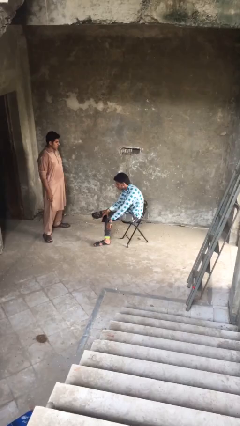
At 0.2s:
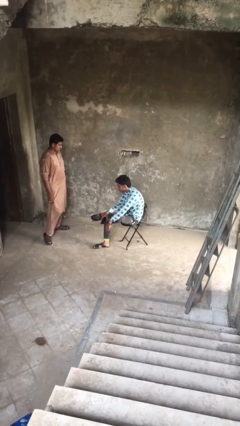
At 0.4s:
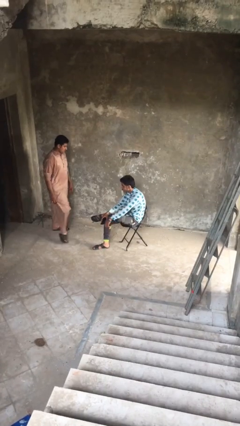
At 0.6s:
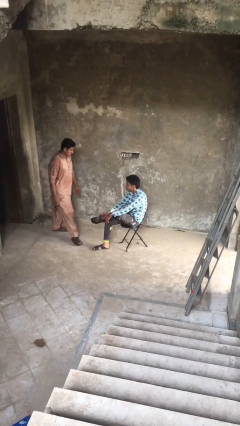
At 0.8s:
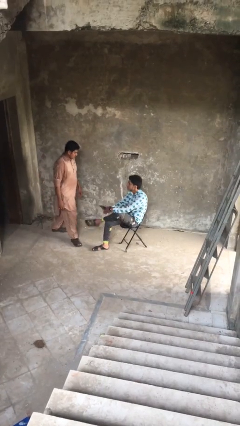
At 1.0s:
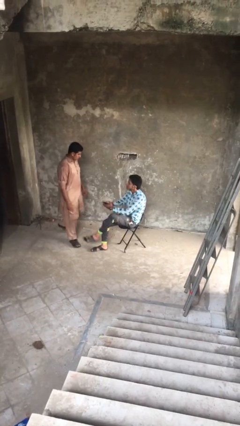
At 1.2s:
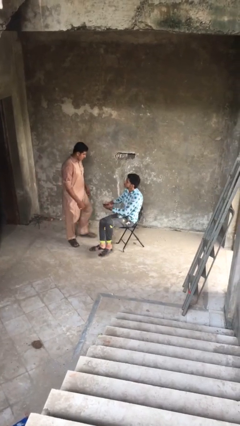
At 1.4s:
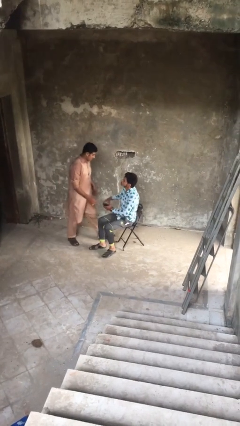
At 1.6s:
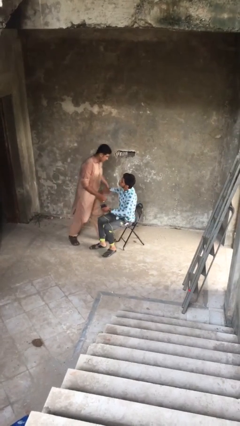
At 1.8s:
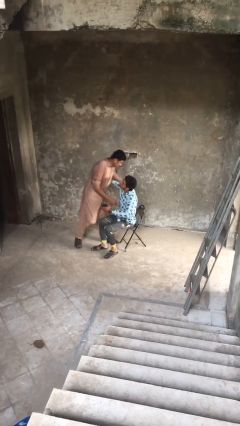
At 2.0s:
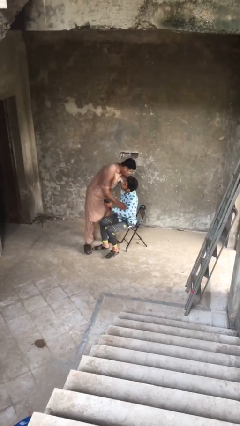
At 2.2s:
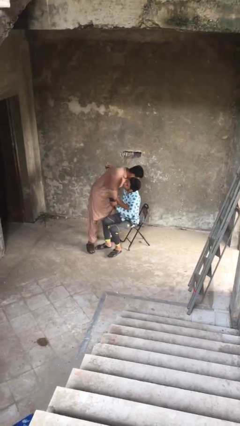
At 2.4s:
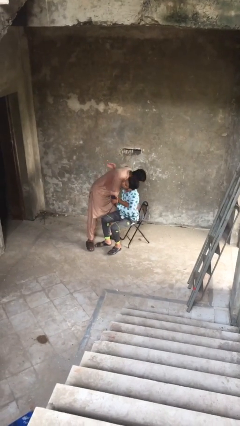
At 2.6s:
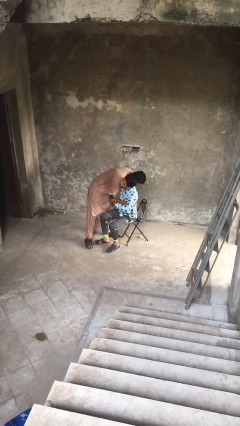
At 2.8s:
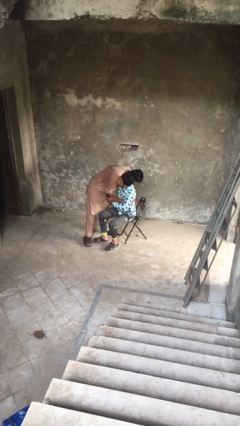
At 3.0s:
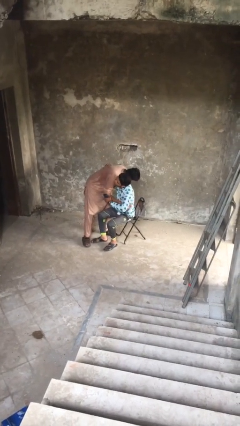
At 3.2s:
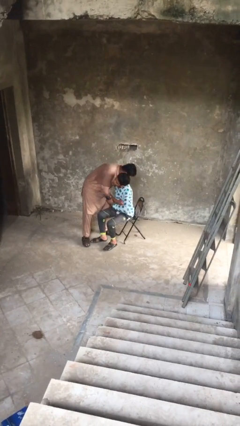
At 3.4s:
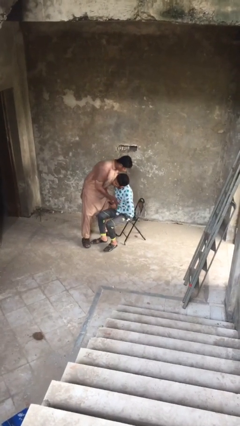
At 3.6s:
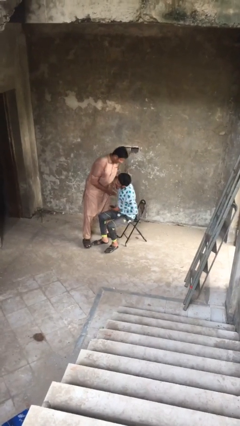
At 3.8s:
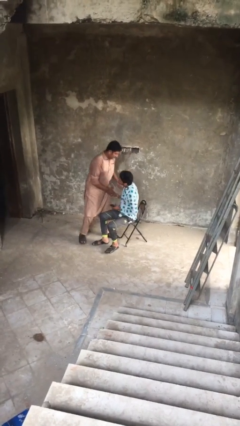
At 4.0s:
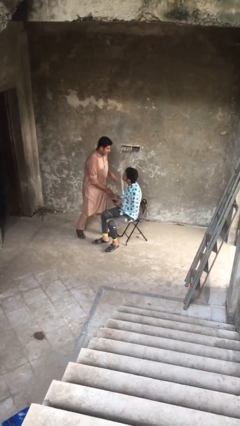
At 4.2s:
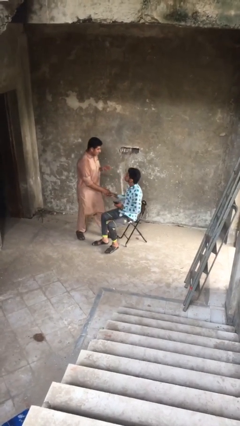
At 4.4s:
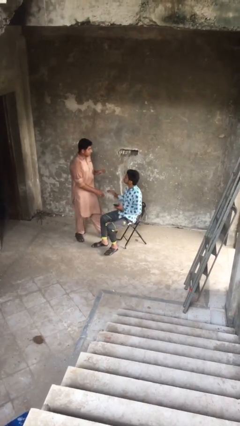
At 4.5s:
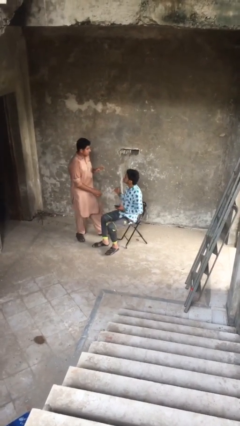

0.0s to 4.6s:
person embraces person

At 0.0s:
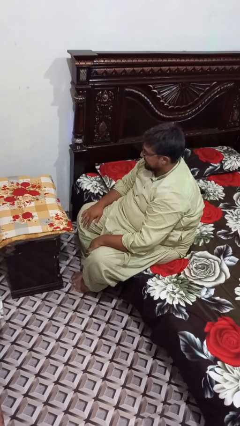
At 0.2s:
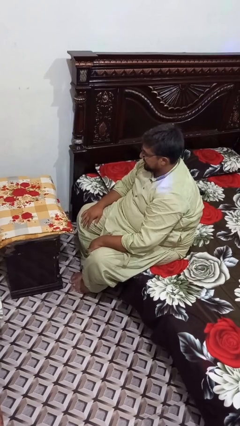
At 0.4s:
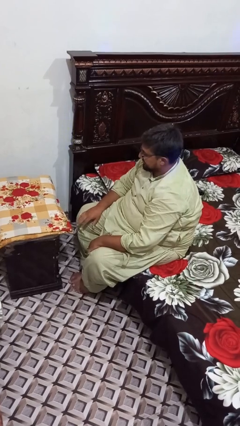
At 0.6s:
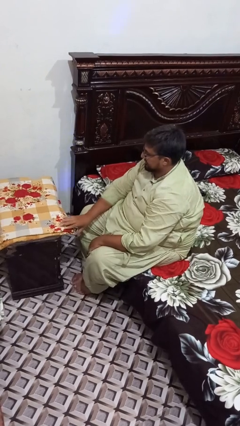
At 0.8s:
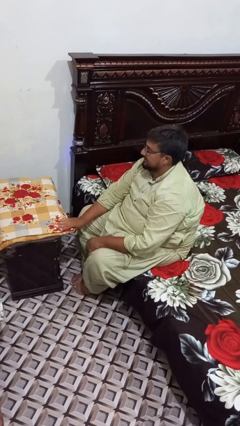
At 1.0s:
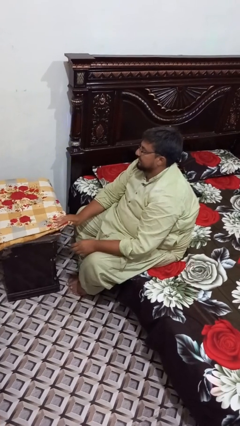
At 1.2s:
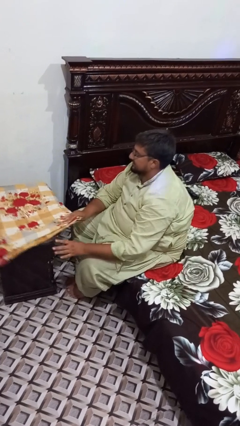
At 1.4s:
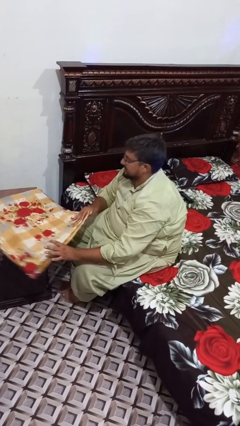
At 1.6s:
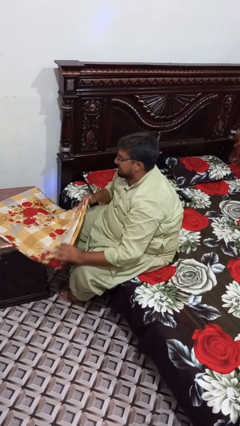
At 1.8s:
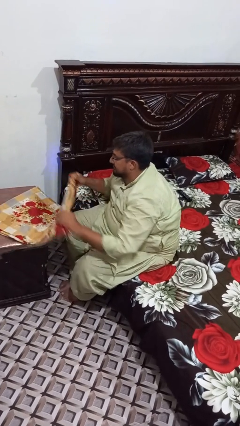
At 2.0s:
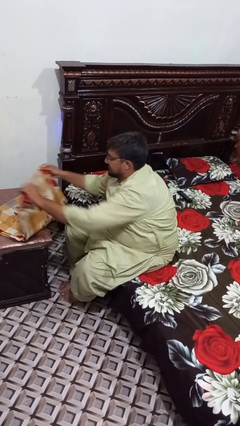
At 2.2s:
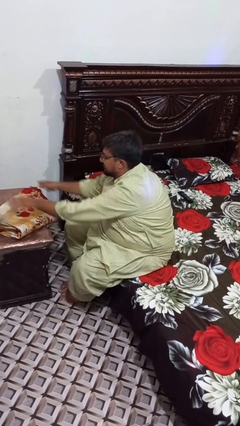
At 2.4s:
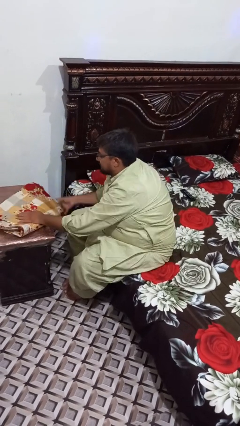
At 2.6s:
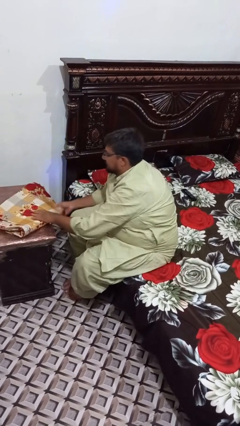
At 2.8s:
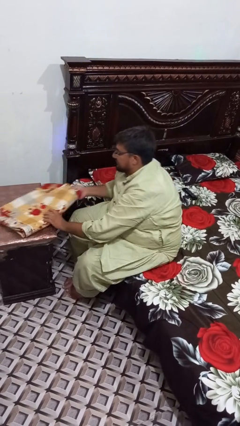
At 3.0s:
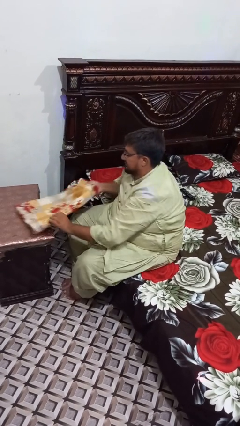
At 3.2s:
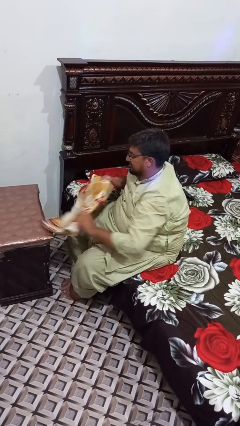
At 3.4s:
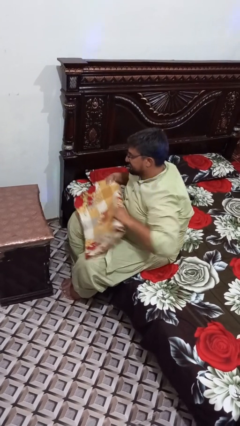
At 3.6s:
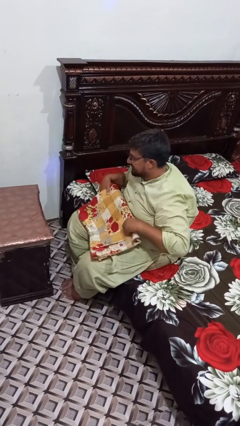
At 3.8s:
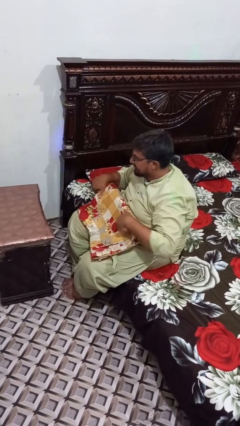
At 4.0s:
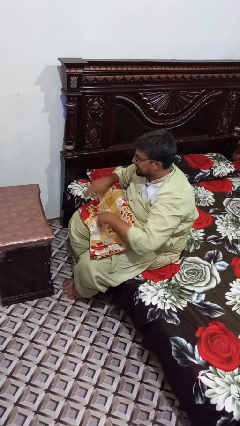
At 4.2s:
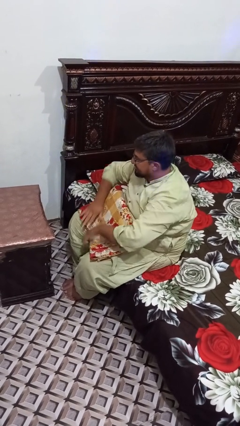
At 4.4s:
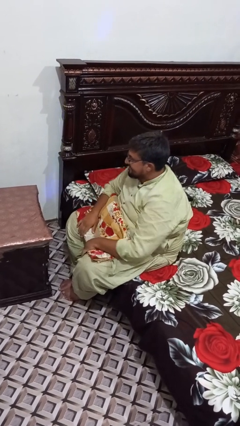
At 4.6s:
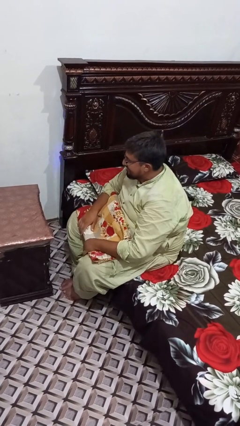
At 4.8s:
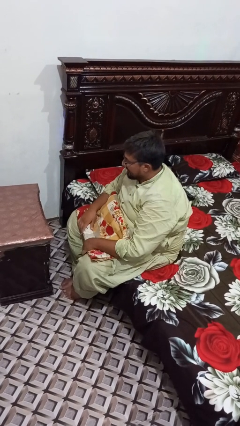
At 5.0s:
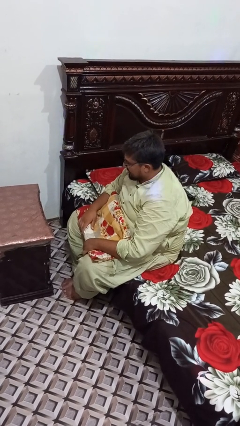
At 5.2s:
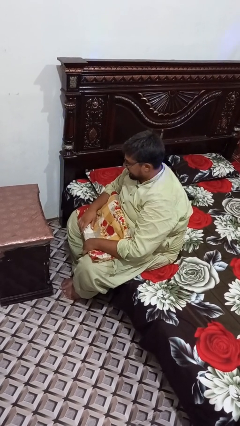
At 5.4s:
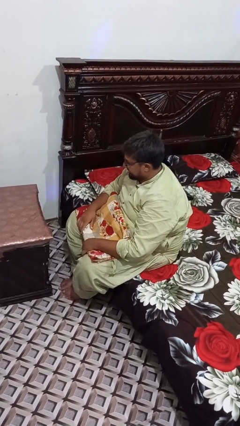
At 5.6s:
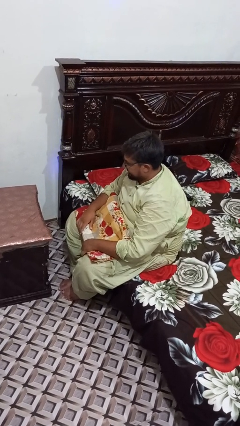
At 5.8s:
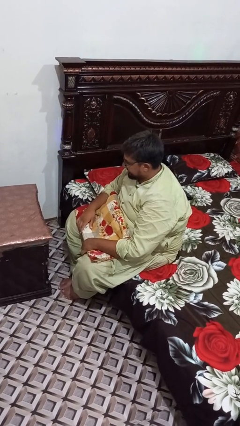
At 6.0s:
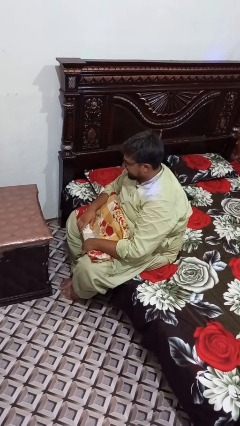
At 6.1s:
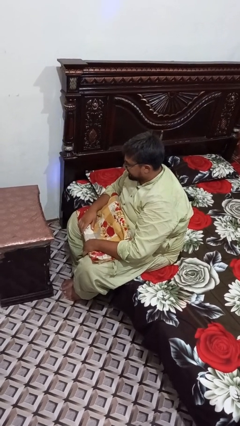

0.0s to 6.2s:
person folds tablecloth

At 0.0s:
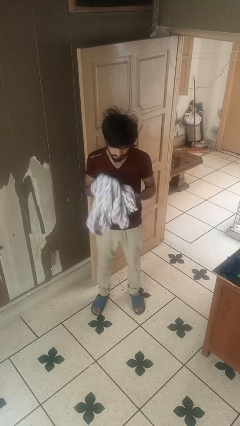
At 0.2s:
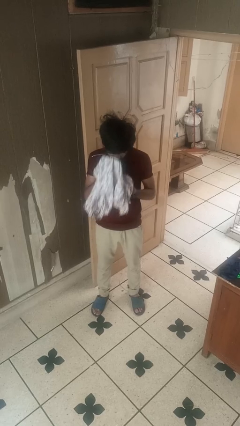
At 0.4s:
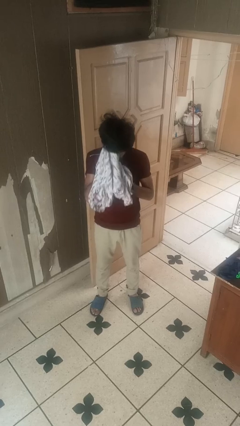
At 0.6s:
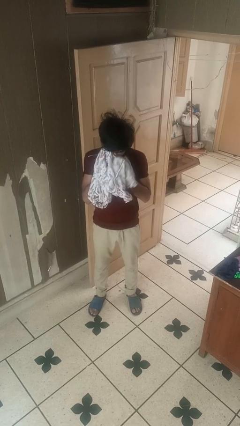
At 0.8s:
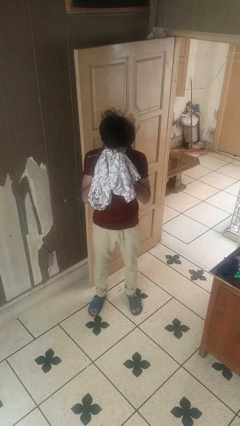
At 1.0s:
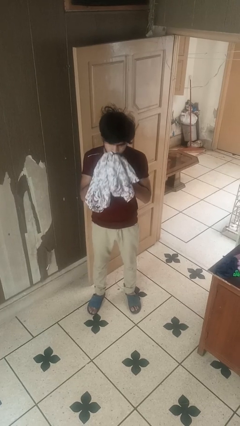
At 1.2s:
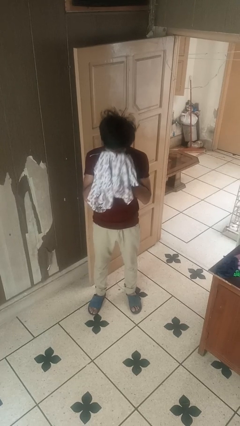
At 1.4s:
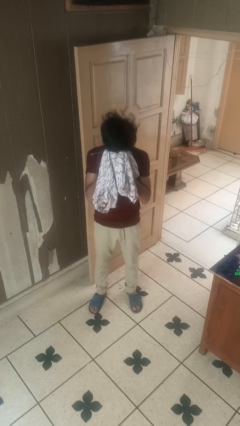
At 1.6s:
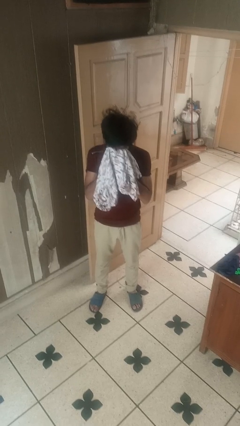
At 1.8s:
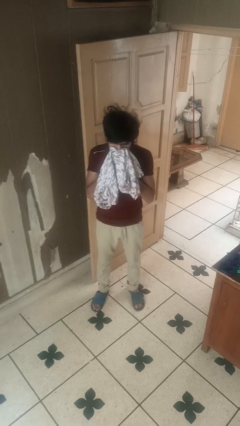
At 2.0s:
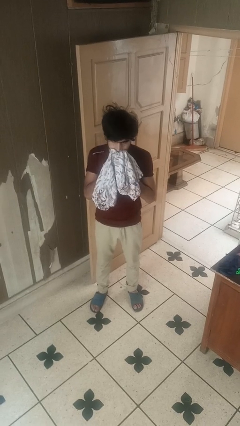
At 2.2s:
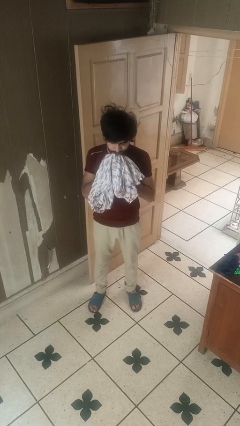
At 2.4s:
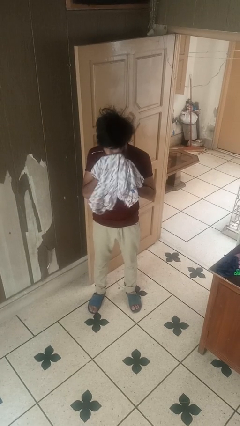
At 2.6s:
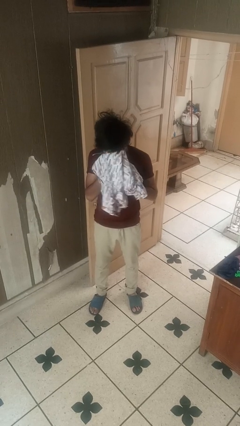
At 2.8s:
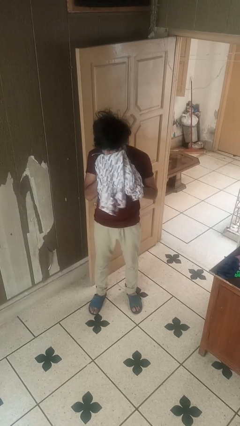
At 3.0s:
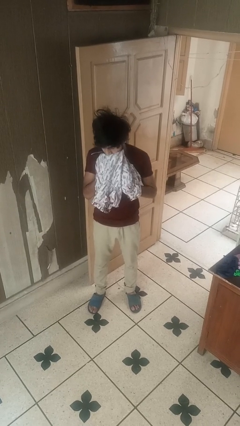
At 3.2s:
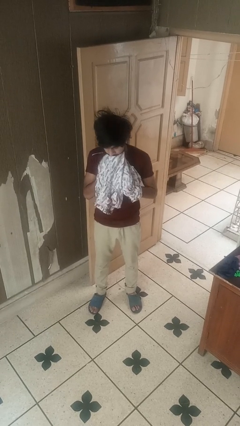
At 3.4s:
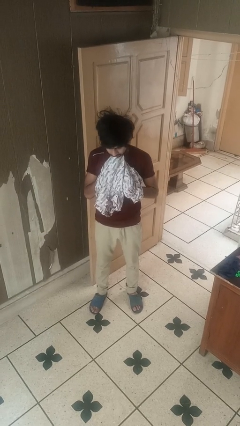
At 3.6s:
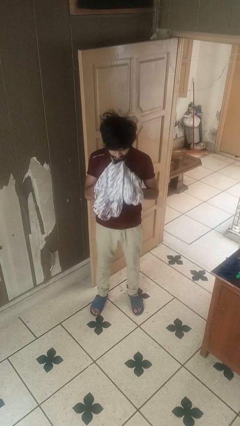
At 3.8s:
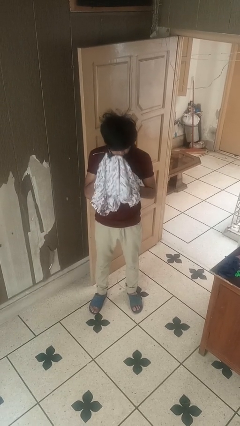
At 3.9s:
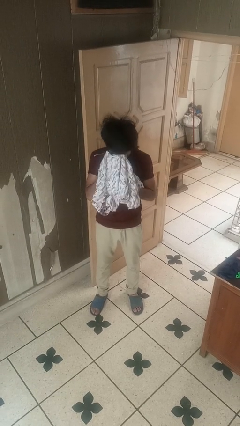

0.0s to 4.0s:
person wipes mouth with napkin

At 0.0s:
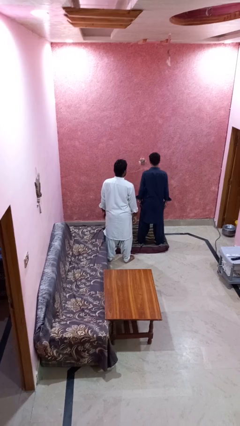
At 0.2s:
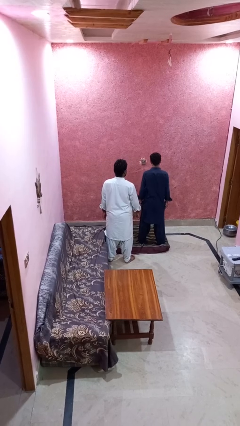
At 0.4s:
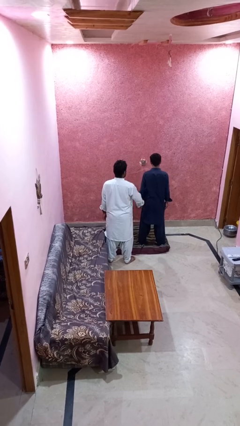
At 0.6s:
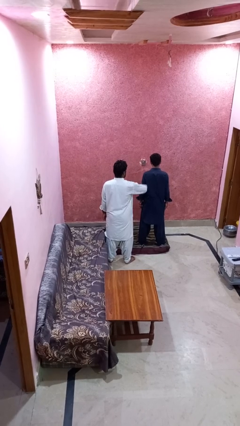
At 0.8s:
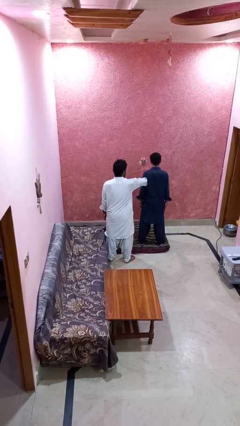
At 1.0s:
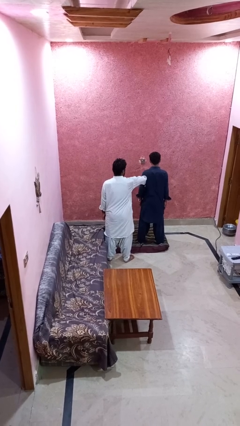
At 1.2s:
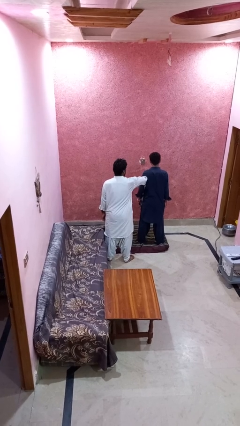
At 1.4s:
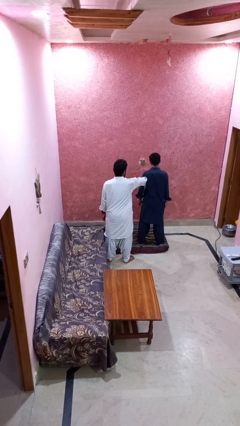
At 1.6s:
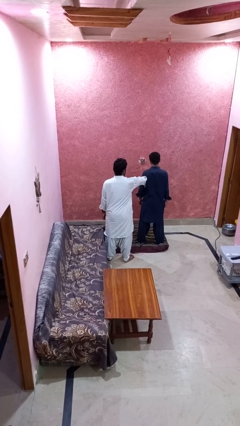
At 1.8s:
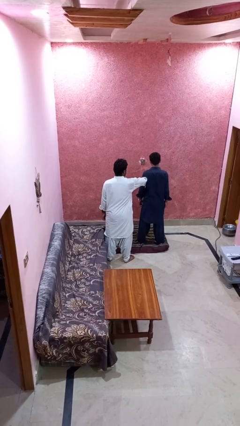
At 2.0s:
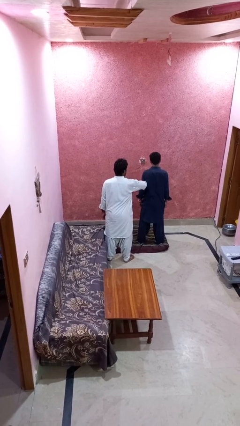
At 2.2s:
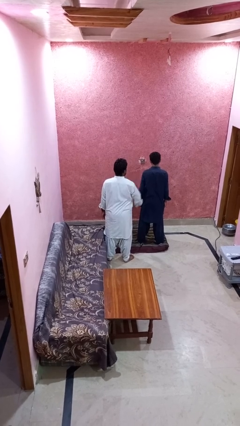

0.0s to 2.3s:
person grabs person by forearm

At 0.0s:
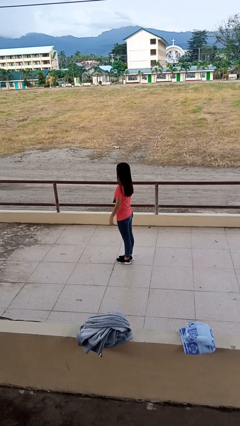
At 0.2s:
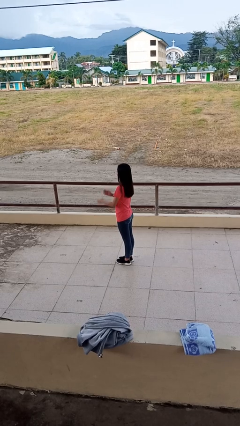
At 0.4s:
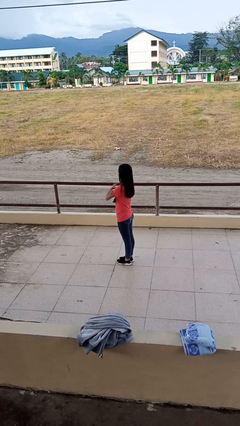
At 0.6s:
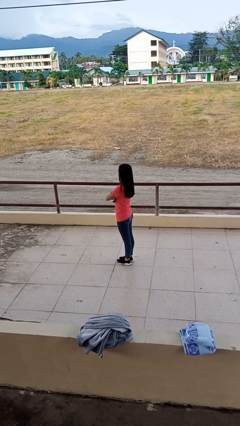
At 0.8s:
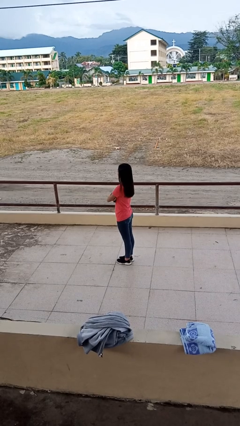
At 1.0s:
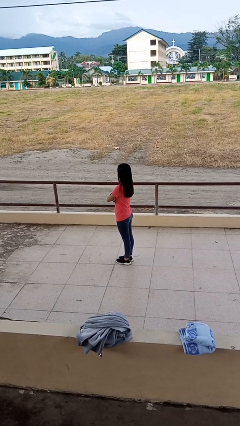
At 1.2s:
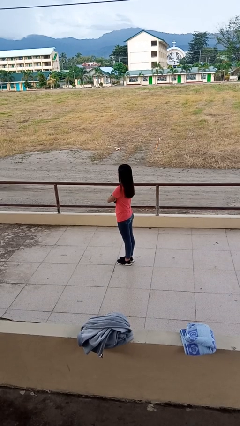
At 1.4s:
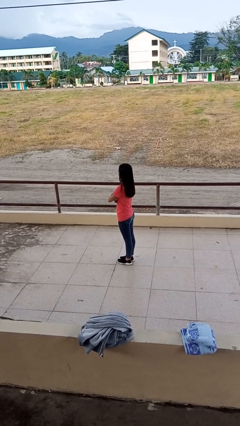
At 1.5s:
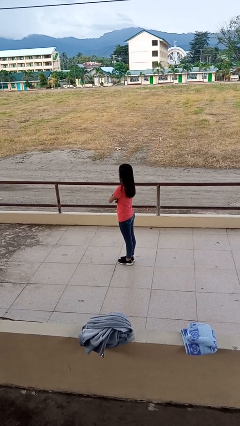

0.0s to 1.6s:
person crosses arms
